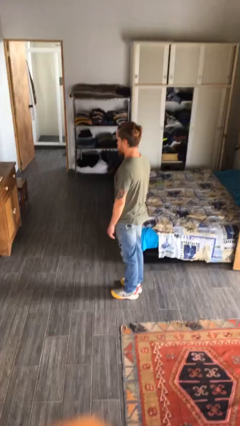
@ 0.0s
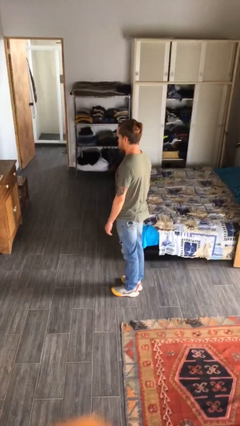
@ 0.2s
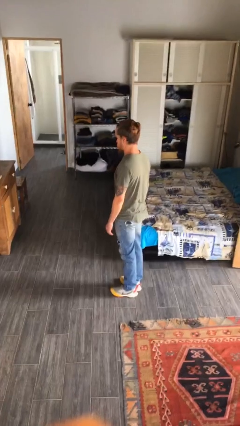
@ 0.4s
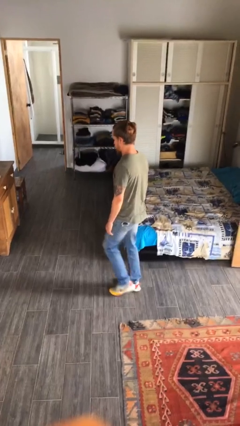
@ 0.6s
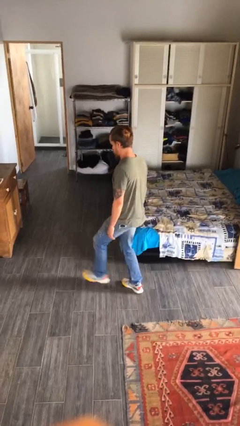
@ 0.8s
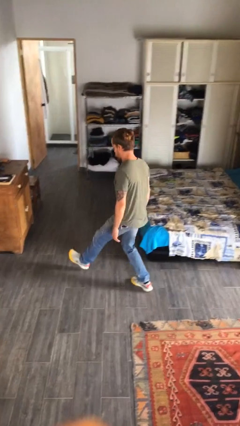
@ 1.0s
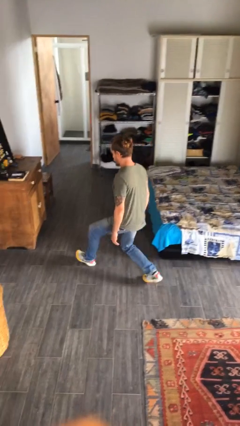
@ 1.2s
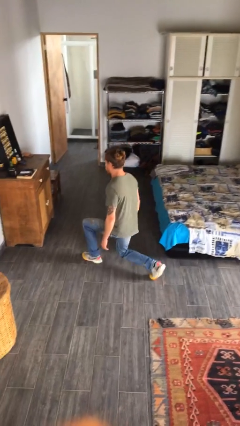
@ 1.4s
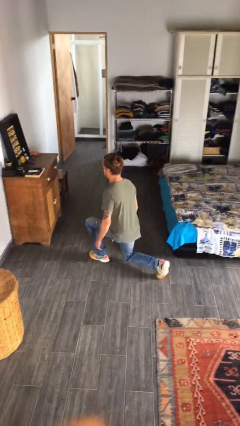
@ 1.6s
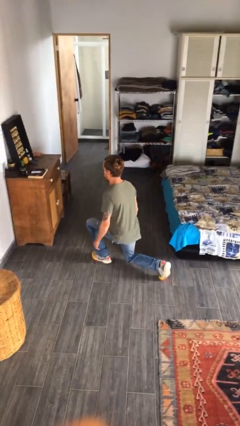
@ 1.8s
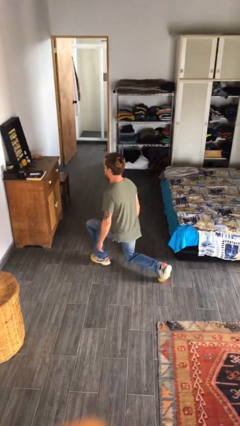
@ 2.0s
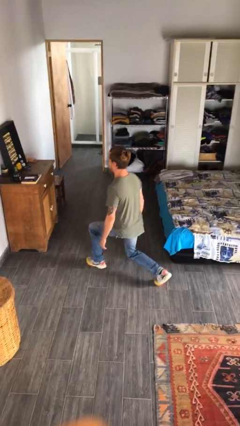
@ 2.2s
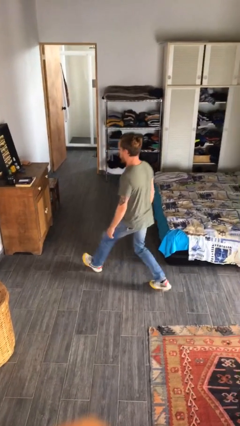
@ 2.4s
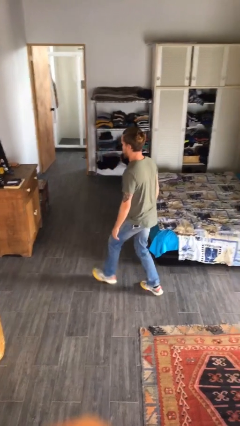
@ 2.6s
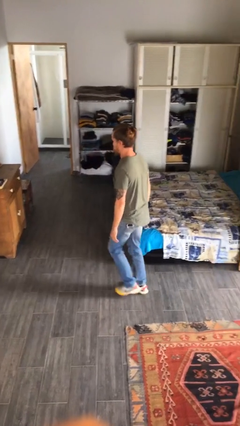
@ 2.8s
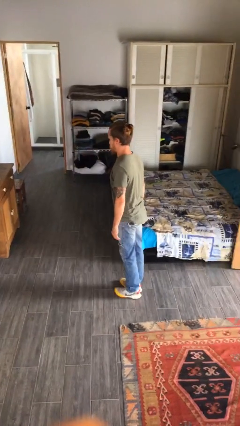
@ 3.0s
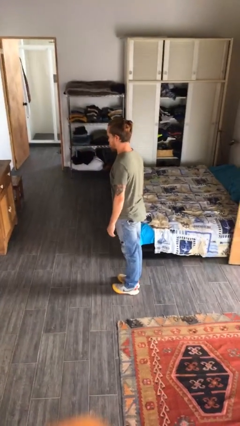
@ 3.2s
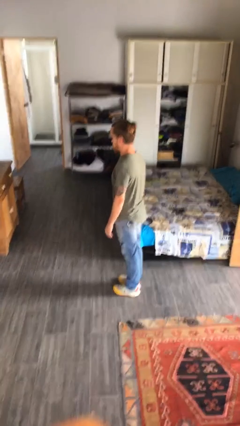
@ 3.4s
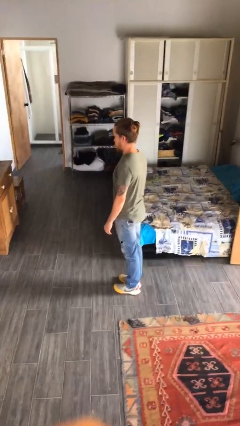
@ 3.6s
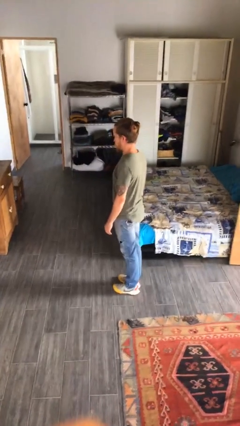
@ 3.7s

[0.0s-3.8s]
person exercises with lunges

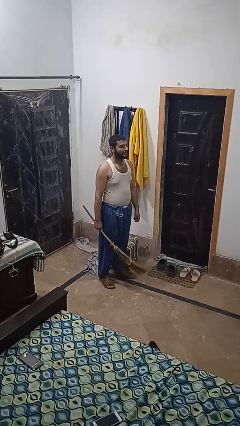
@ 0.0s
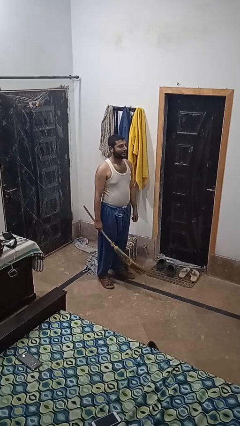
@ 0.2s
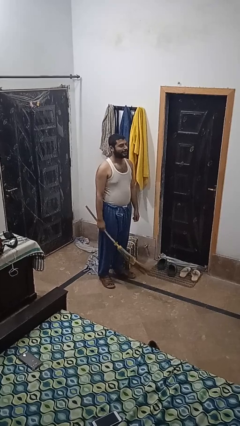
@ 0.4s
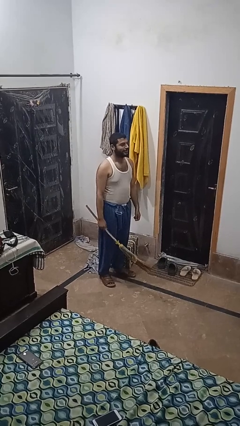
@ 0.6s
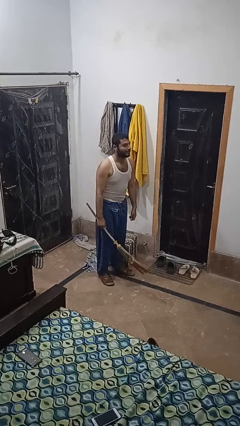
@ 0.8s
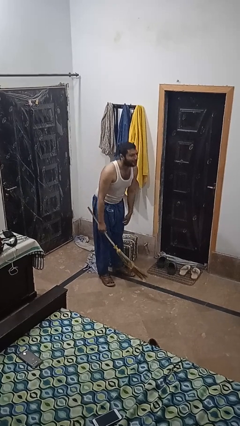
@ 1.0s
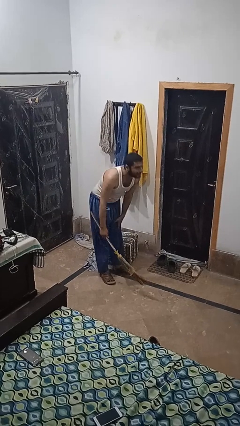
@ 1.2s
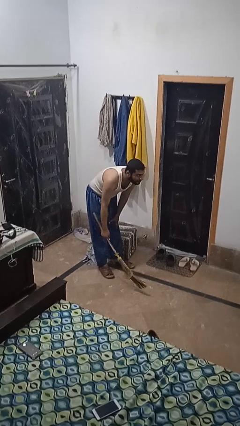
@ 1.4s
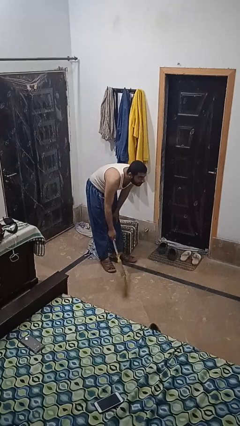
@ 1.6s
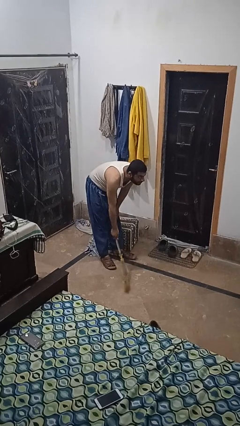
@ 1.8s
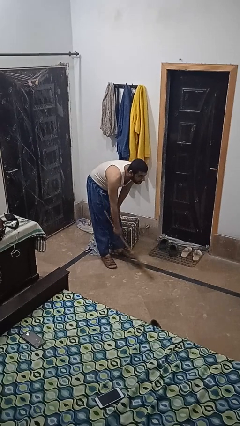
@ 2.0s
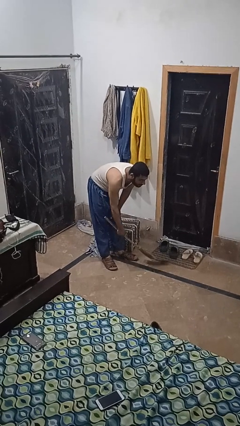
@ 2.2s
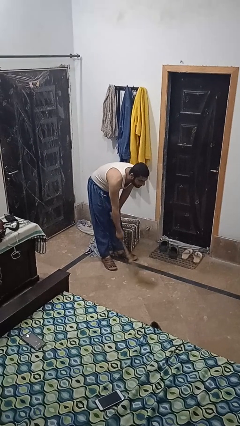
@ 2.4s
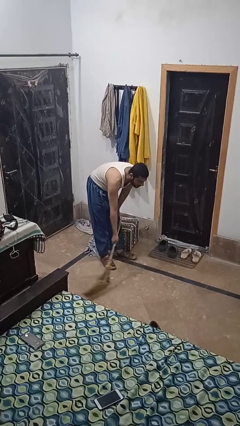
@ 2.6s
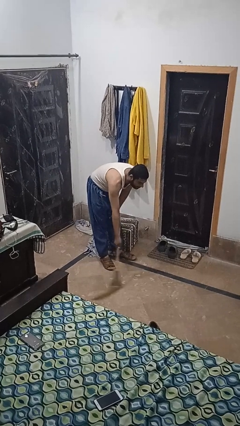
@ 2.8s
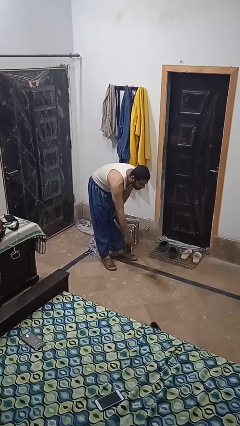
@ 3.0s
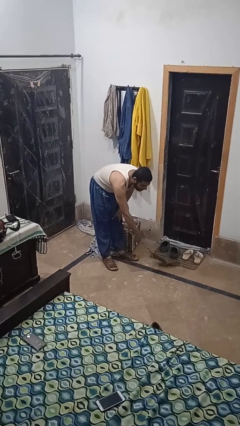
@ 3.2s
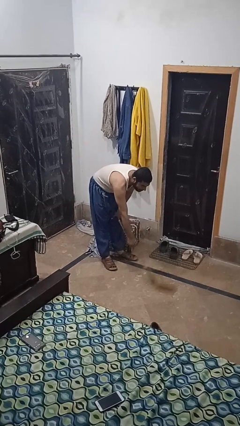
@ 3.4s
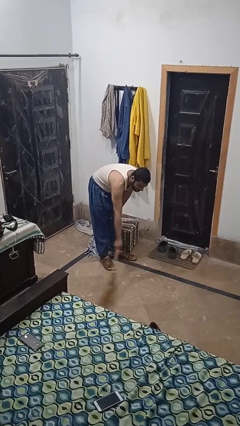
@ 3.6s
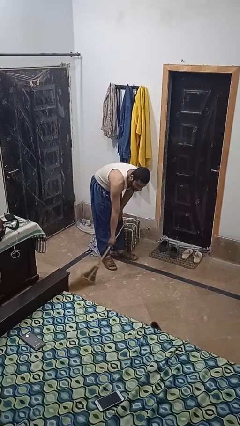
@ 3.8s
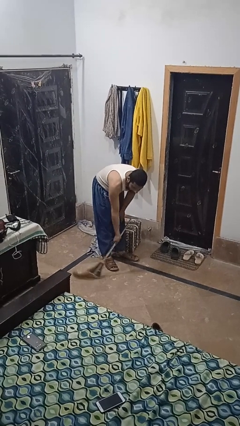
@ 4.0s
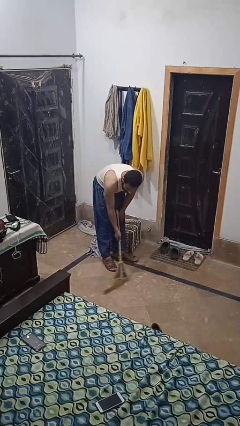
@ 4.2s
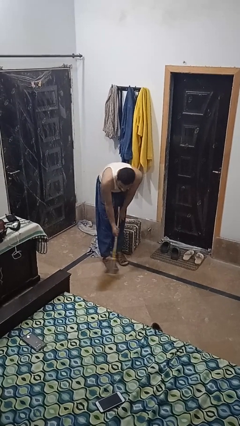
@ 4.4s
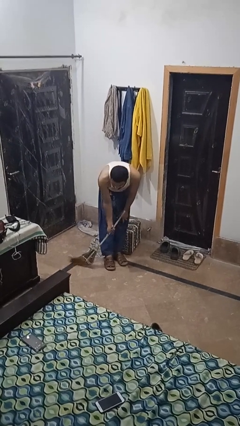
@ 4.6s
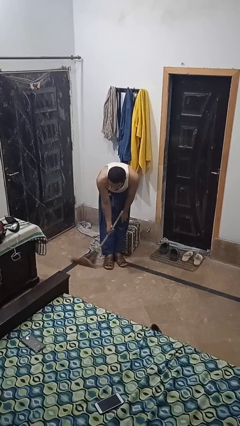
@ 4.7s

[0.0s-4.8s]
person sweeps floor

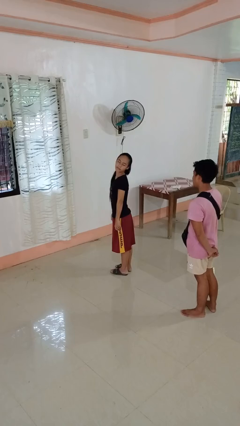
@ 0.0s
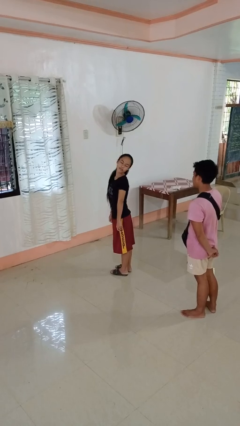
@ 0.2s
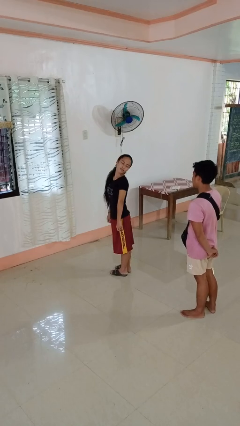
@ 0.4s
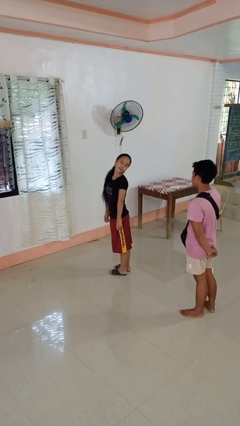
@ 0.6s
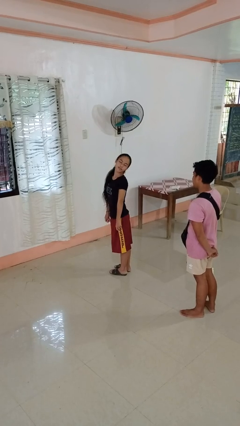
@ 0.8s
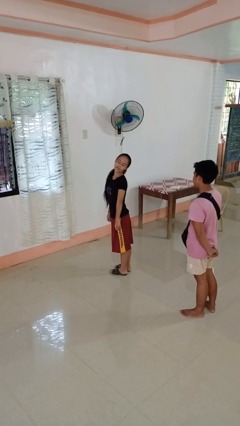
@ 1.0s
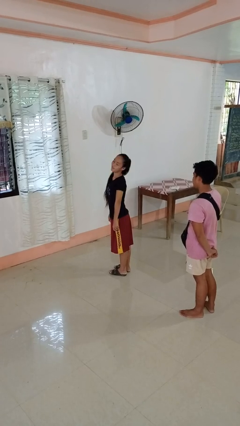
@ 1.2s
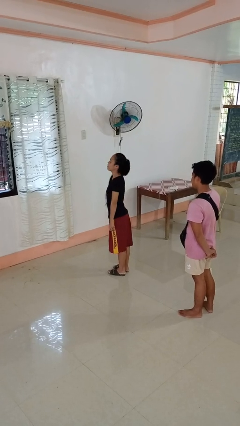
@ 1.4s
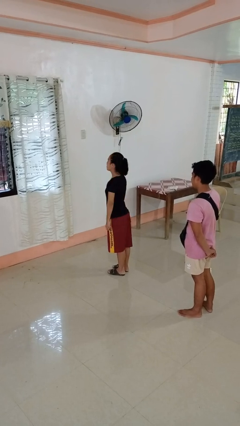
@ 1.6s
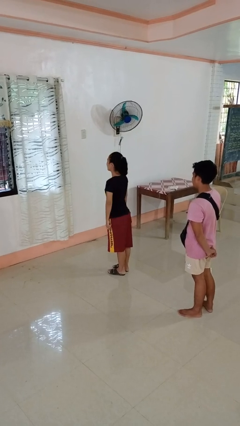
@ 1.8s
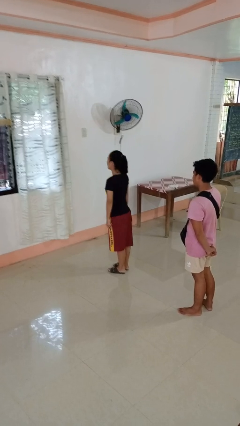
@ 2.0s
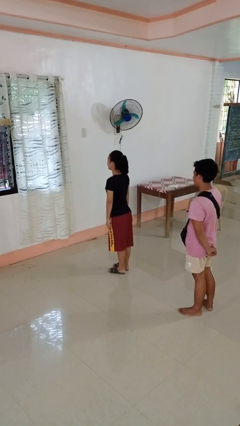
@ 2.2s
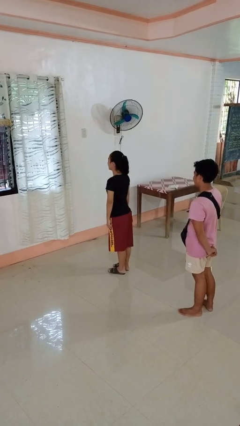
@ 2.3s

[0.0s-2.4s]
person looks over shoulder

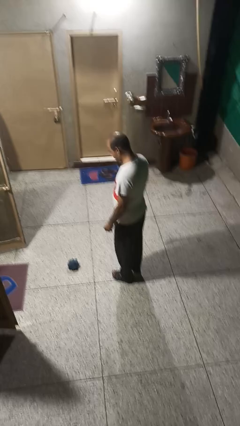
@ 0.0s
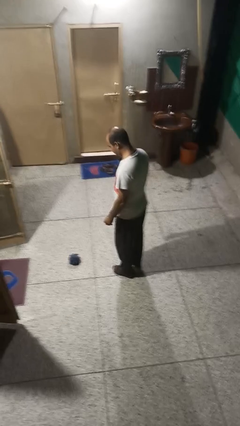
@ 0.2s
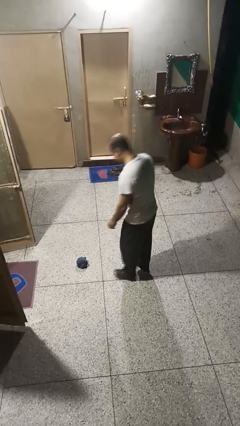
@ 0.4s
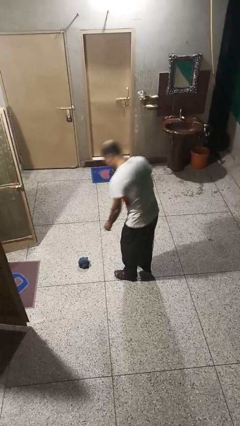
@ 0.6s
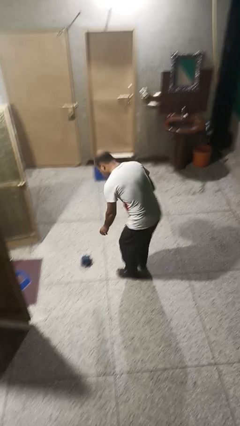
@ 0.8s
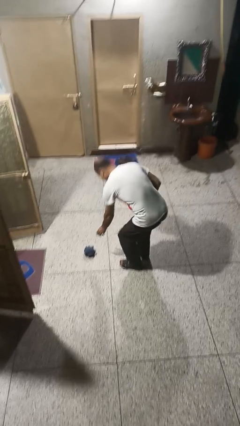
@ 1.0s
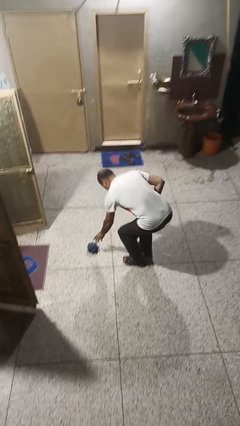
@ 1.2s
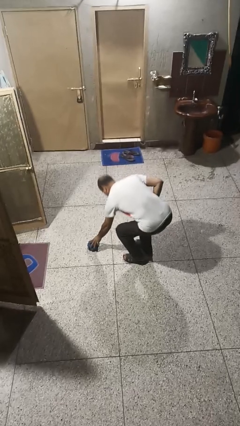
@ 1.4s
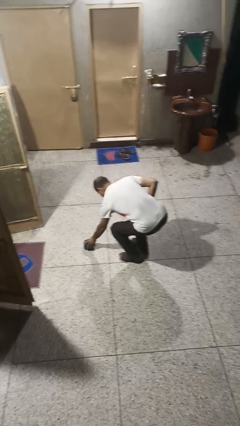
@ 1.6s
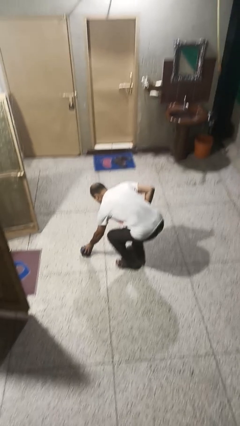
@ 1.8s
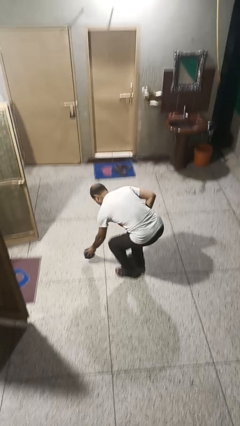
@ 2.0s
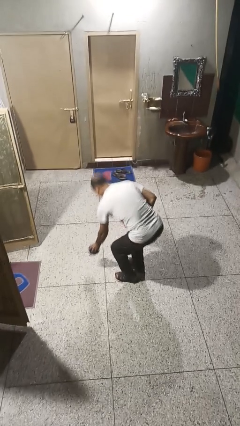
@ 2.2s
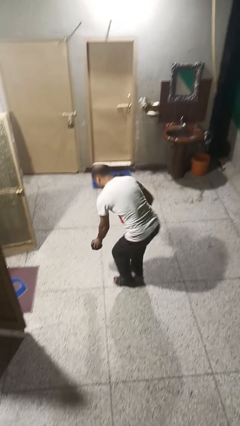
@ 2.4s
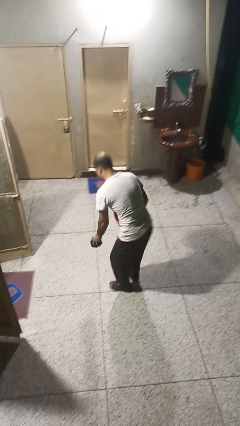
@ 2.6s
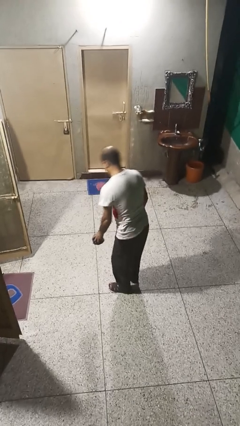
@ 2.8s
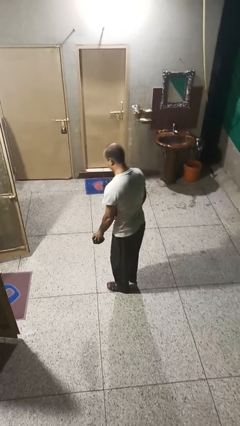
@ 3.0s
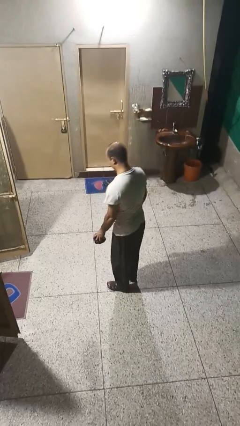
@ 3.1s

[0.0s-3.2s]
person picks up object from floor

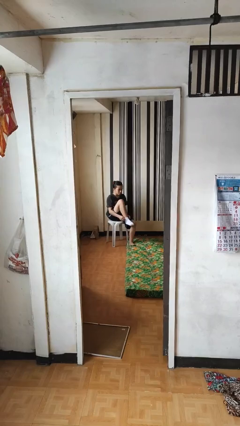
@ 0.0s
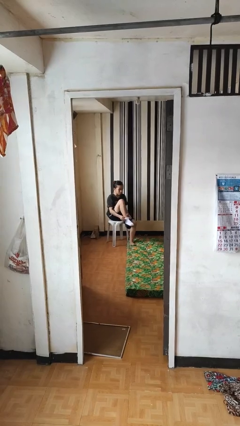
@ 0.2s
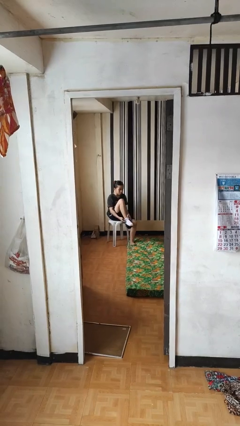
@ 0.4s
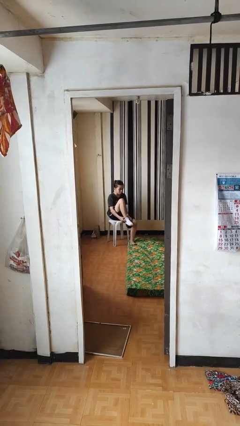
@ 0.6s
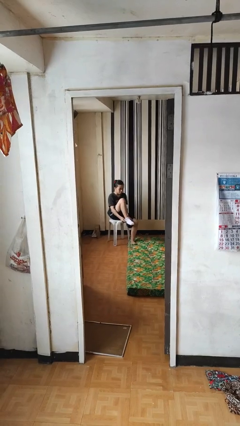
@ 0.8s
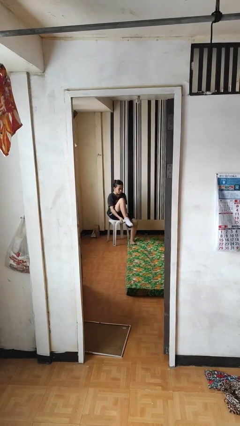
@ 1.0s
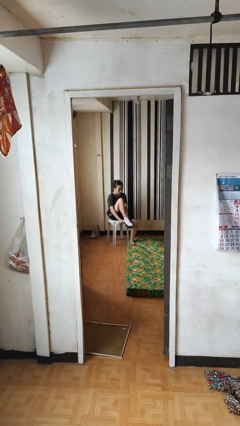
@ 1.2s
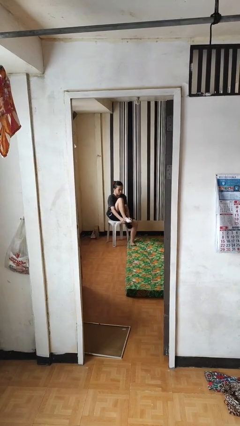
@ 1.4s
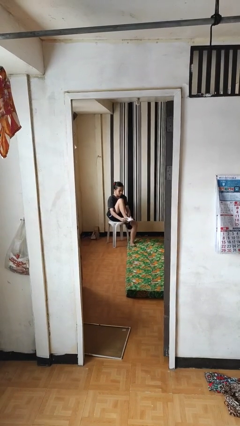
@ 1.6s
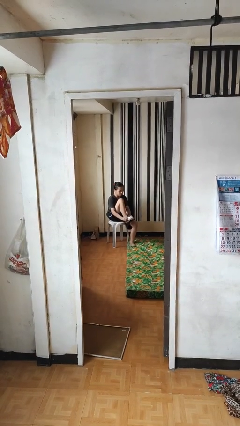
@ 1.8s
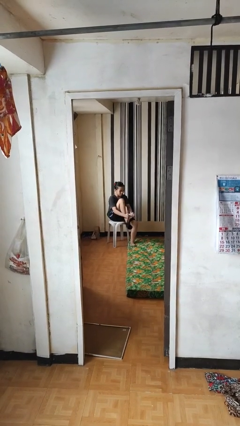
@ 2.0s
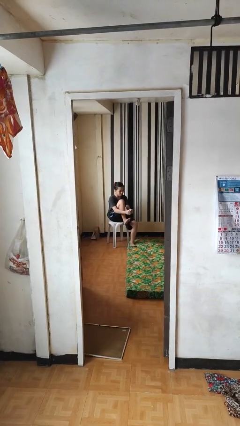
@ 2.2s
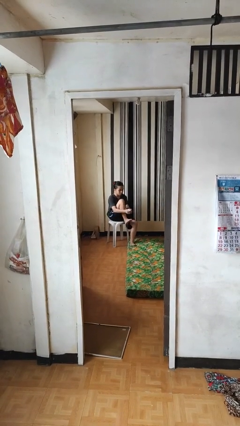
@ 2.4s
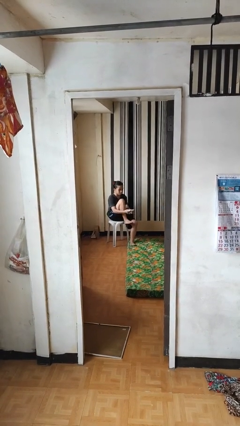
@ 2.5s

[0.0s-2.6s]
person takes off socks

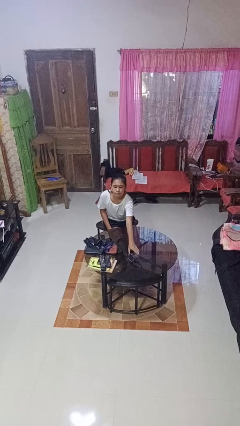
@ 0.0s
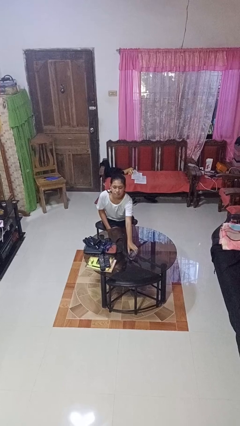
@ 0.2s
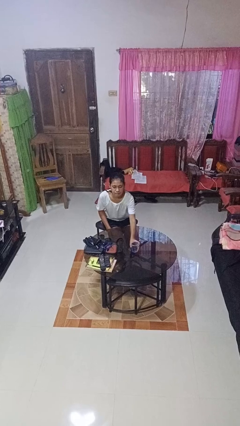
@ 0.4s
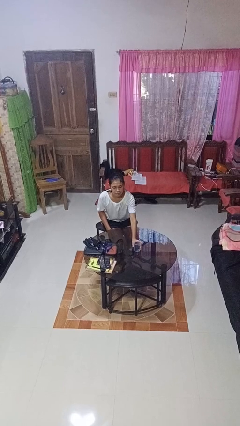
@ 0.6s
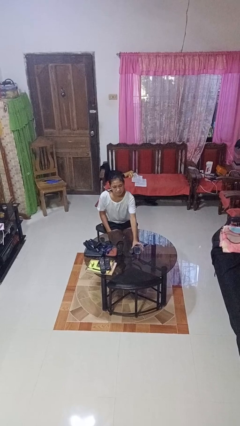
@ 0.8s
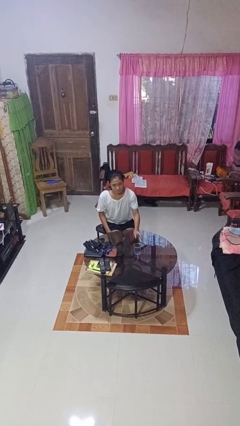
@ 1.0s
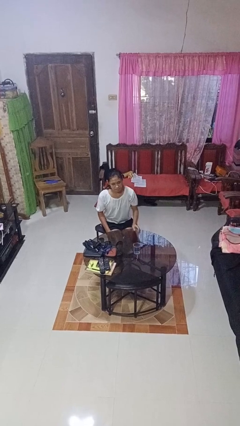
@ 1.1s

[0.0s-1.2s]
person sets upright glass
